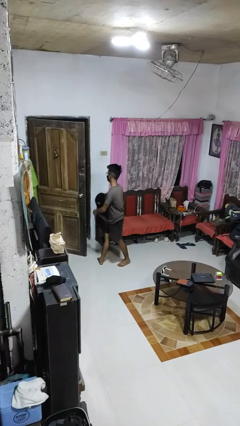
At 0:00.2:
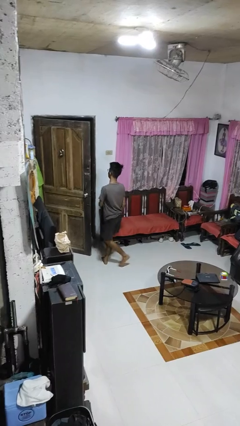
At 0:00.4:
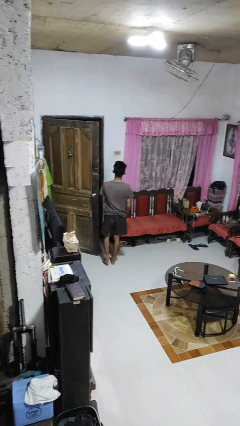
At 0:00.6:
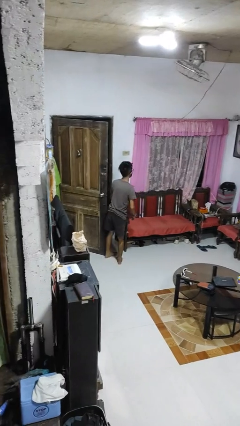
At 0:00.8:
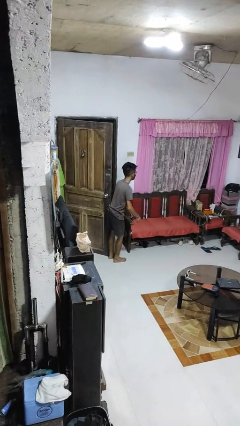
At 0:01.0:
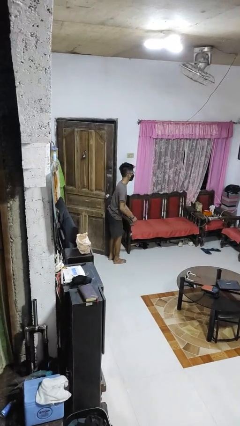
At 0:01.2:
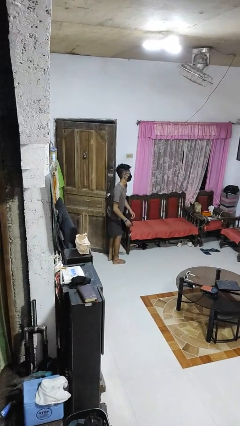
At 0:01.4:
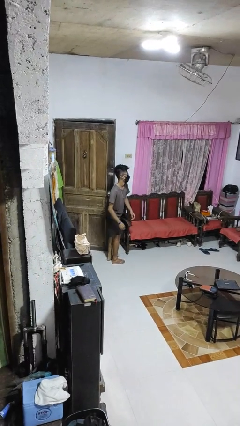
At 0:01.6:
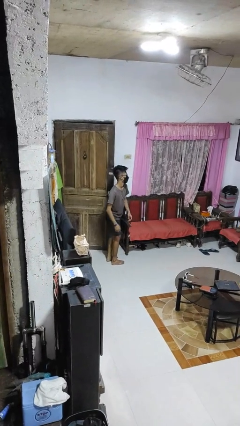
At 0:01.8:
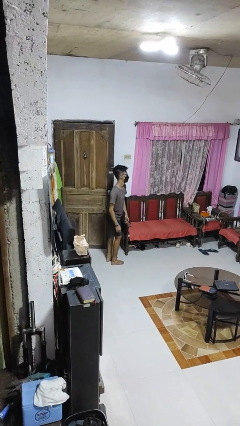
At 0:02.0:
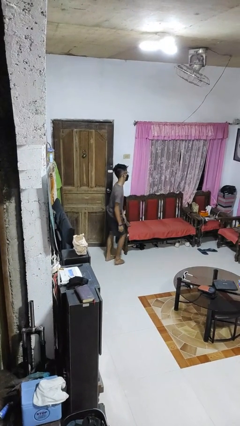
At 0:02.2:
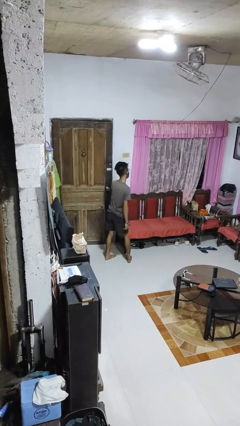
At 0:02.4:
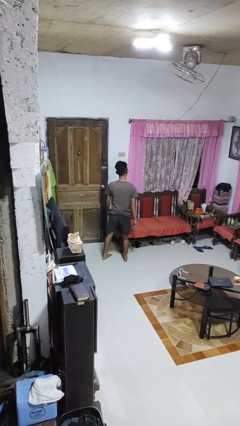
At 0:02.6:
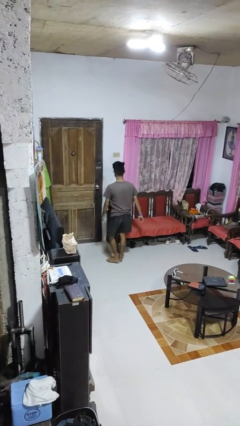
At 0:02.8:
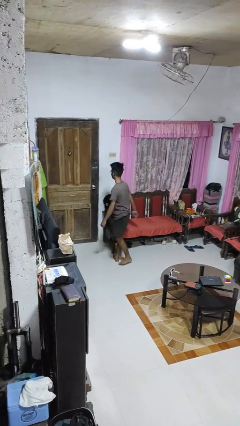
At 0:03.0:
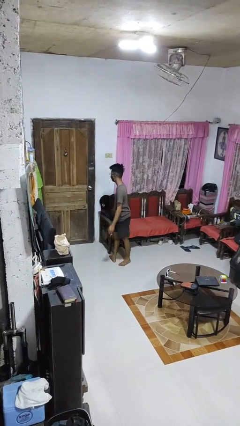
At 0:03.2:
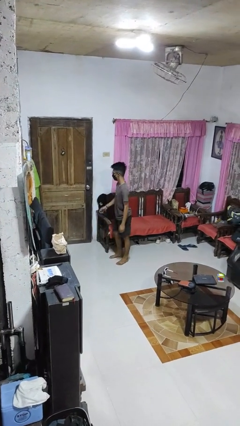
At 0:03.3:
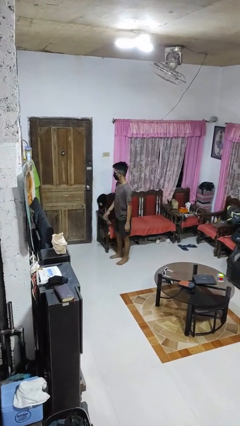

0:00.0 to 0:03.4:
person closes door with hip

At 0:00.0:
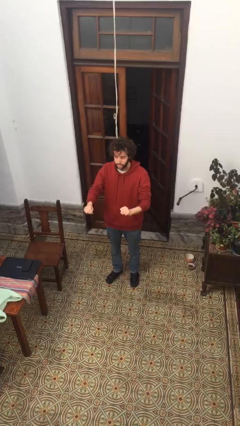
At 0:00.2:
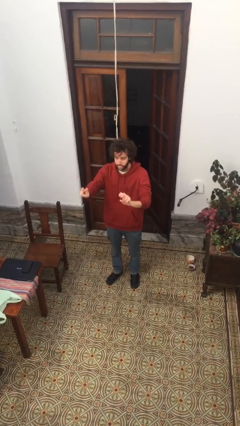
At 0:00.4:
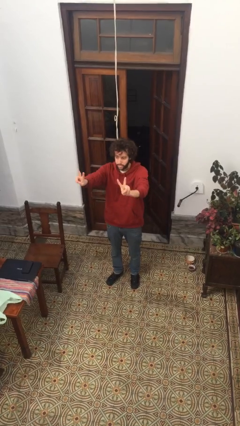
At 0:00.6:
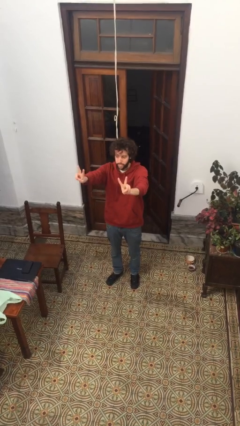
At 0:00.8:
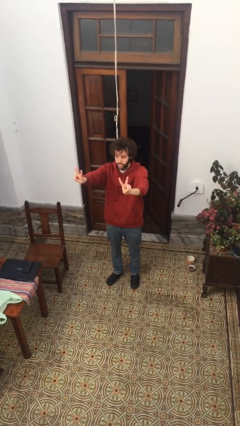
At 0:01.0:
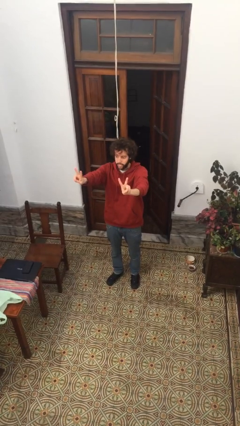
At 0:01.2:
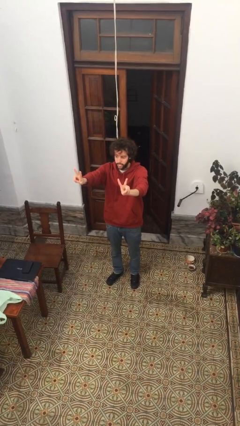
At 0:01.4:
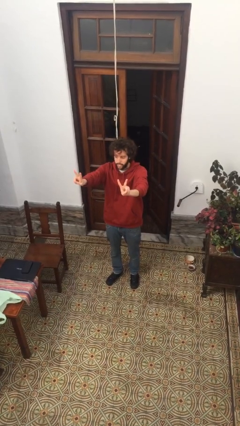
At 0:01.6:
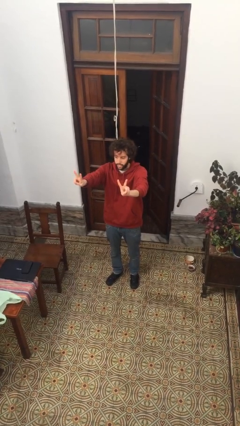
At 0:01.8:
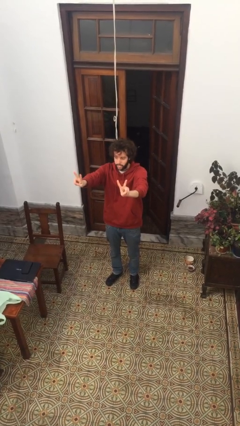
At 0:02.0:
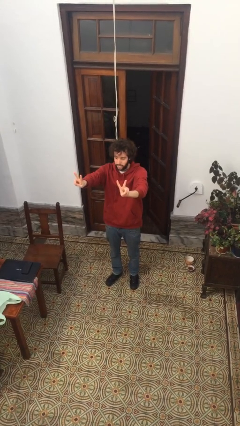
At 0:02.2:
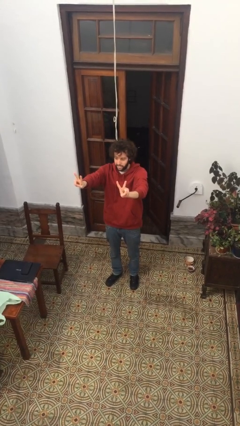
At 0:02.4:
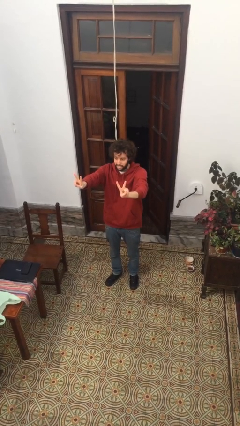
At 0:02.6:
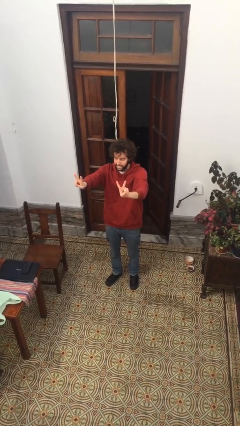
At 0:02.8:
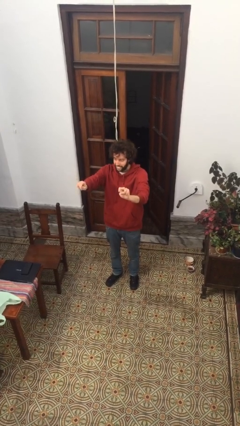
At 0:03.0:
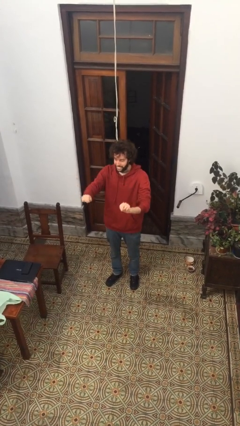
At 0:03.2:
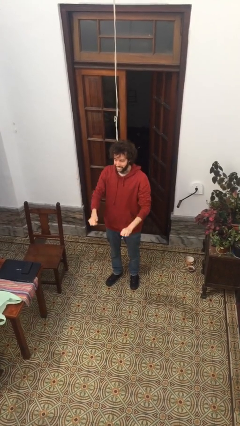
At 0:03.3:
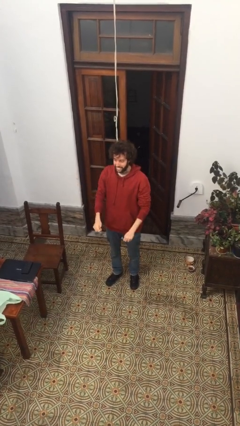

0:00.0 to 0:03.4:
person gestures peace

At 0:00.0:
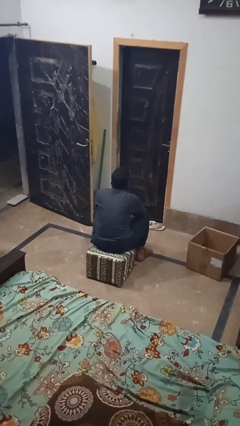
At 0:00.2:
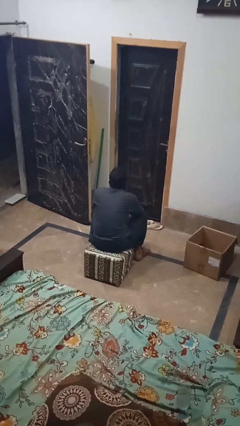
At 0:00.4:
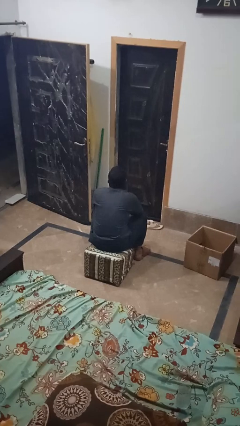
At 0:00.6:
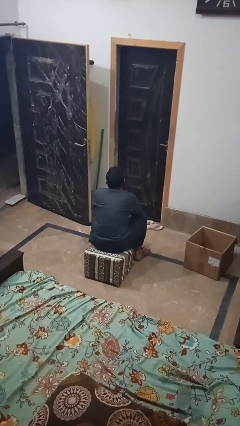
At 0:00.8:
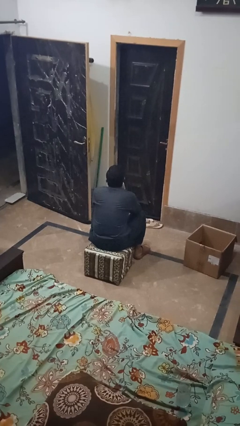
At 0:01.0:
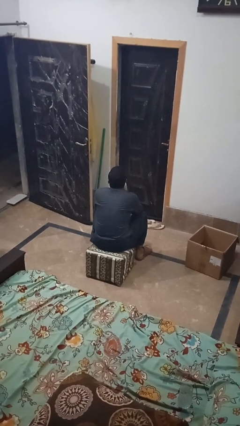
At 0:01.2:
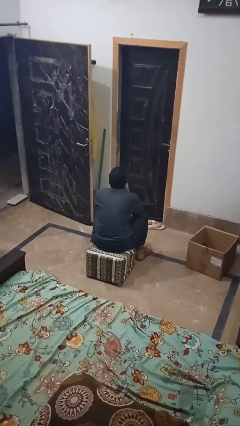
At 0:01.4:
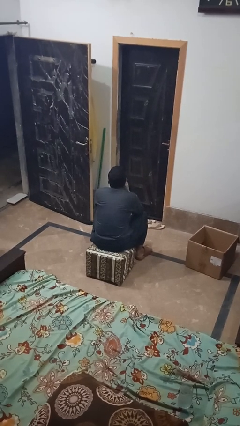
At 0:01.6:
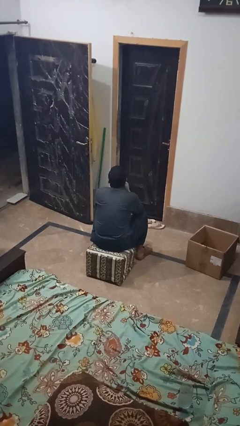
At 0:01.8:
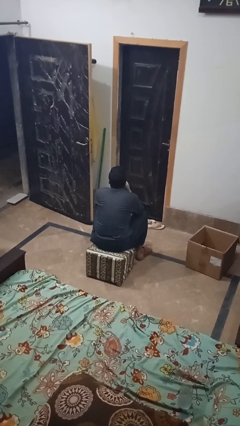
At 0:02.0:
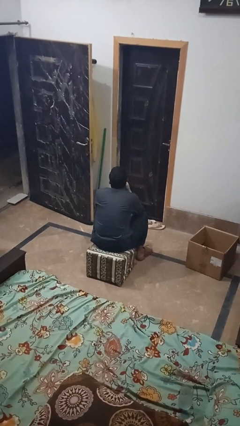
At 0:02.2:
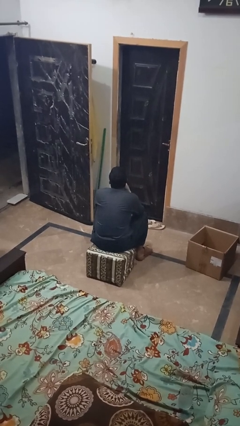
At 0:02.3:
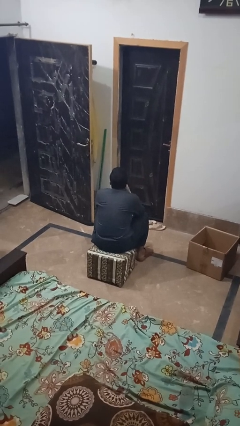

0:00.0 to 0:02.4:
person strokes chin

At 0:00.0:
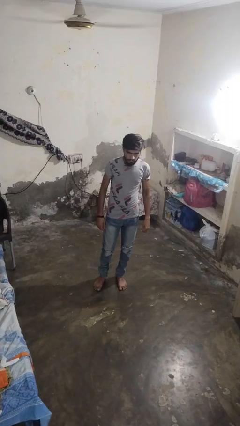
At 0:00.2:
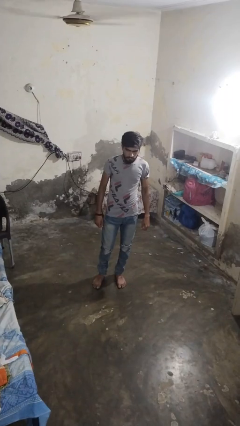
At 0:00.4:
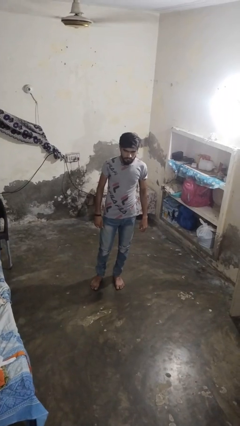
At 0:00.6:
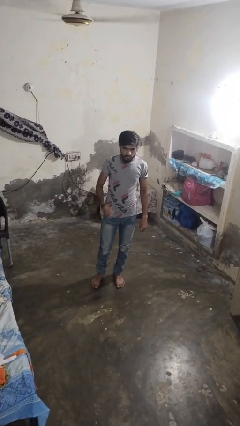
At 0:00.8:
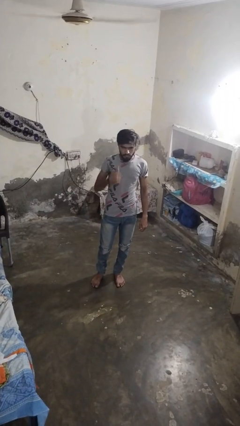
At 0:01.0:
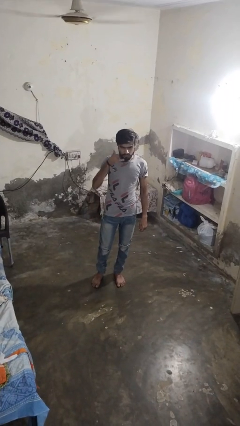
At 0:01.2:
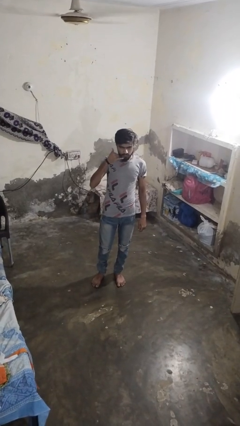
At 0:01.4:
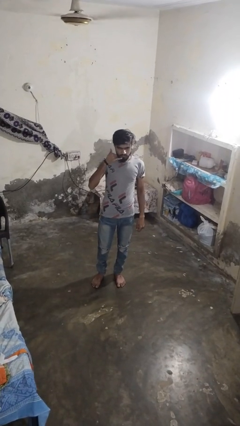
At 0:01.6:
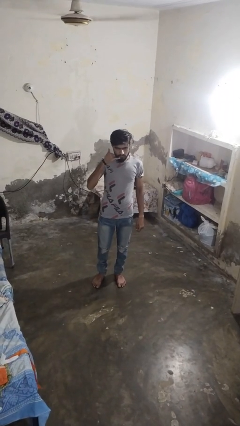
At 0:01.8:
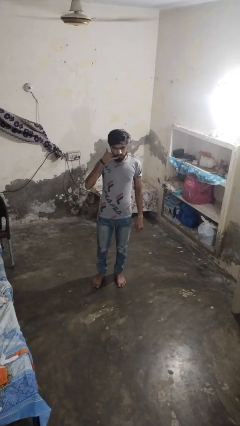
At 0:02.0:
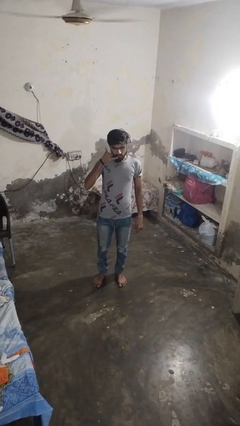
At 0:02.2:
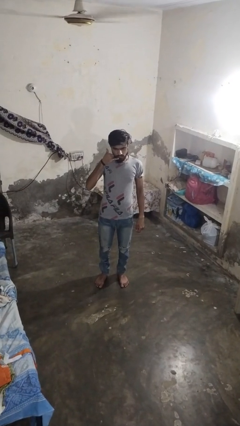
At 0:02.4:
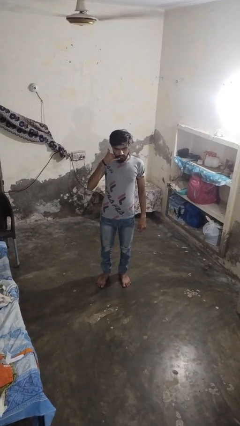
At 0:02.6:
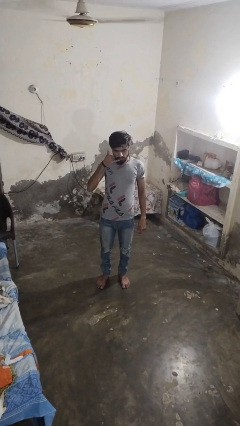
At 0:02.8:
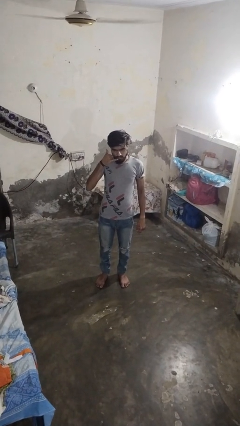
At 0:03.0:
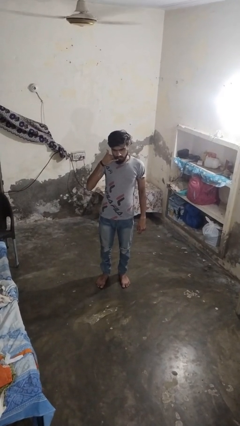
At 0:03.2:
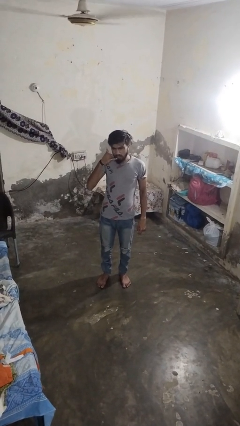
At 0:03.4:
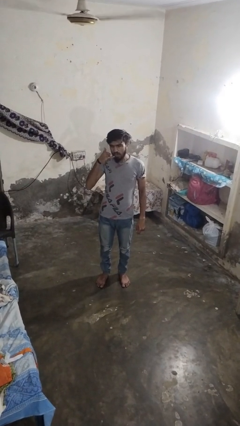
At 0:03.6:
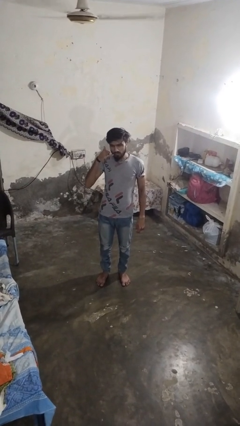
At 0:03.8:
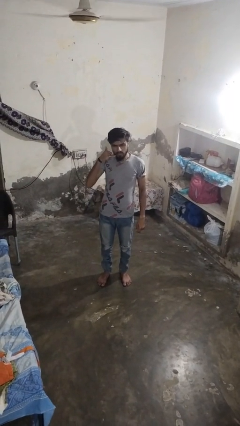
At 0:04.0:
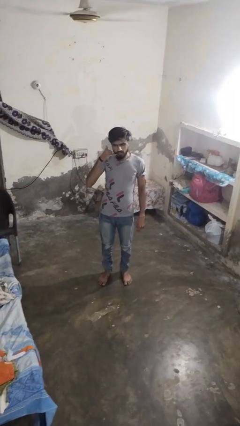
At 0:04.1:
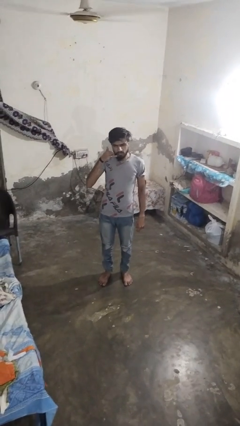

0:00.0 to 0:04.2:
person gestures call me

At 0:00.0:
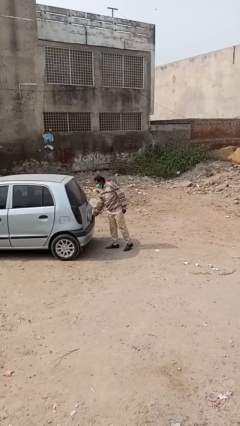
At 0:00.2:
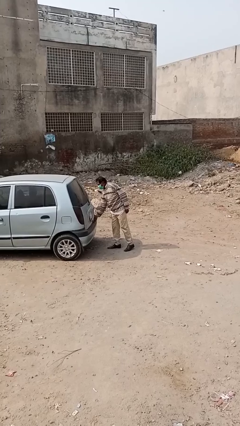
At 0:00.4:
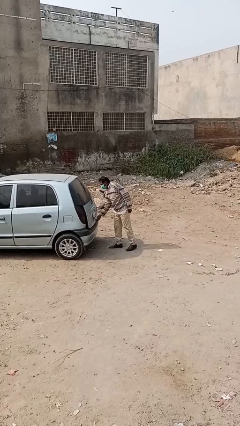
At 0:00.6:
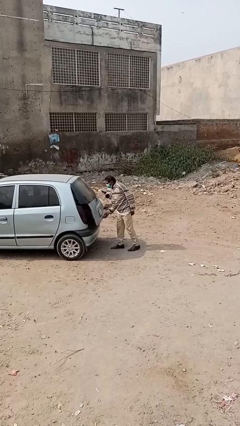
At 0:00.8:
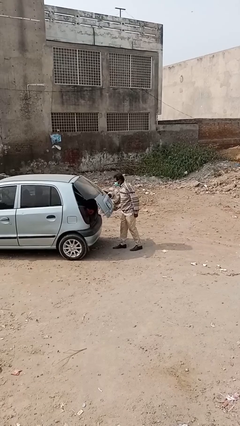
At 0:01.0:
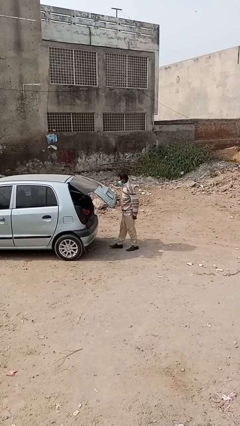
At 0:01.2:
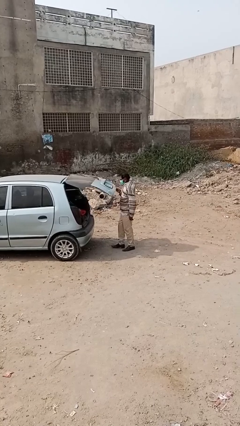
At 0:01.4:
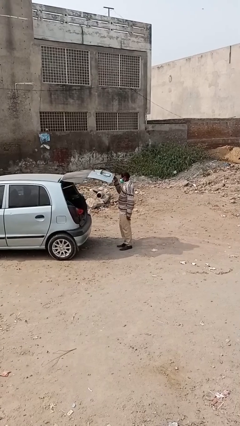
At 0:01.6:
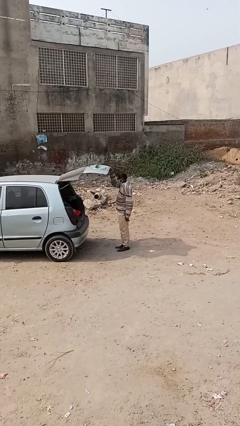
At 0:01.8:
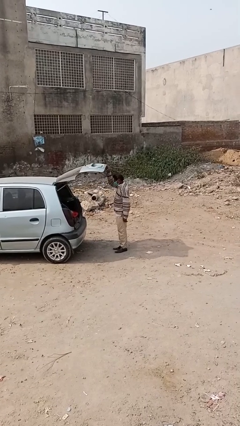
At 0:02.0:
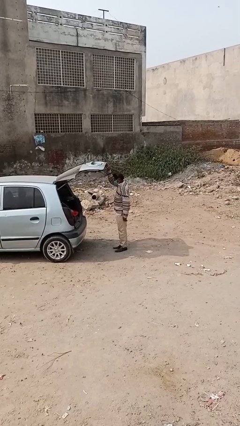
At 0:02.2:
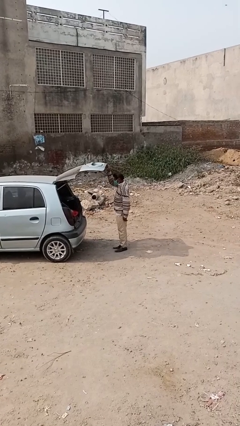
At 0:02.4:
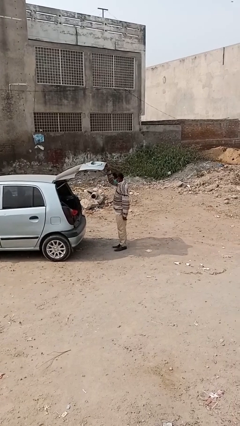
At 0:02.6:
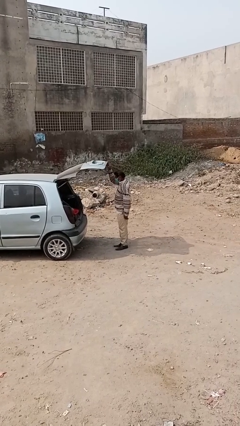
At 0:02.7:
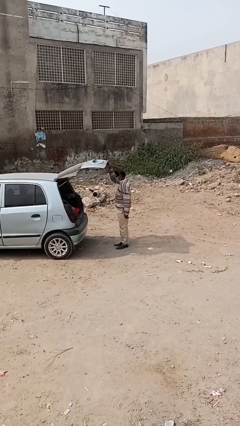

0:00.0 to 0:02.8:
person opens car trunk

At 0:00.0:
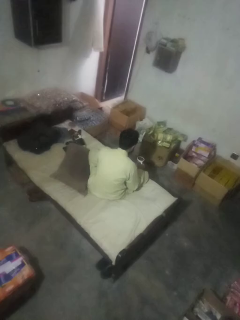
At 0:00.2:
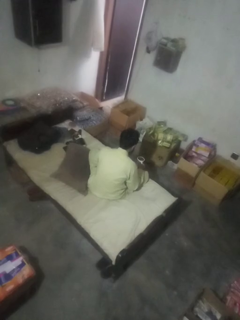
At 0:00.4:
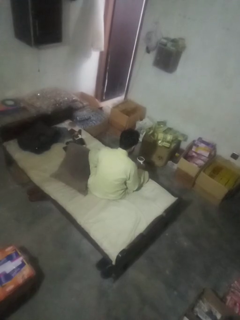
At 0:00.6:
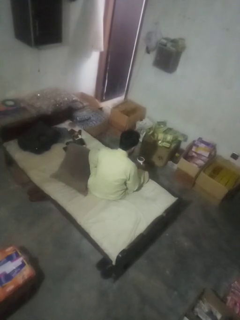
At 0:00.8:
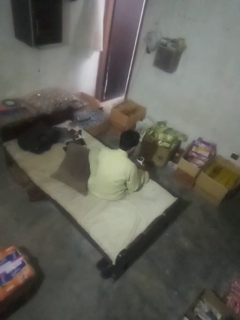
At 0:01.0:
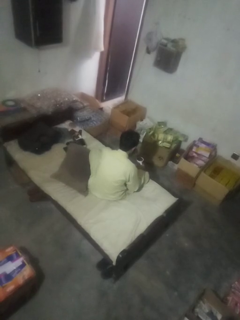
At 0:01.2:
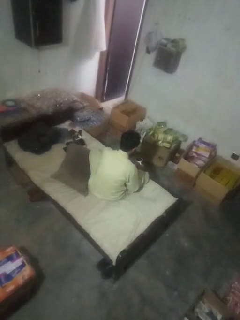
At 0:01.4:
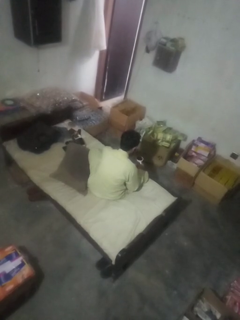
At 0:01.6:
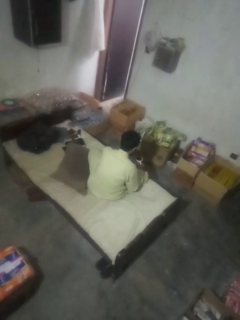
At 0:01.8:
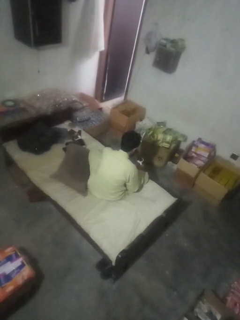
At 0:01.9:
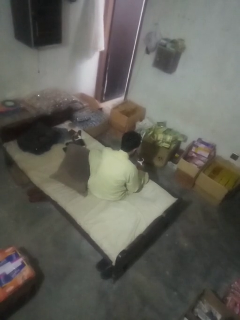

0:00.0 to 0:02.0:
person stirs mug
